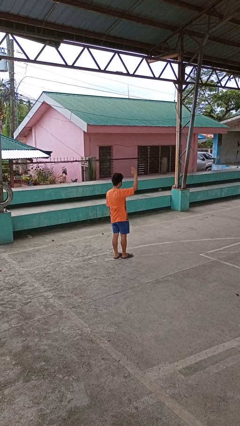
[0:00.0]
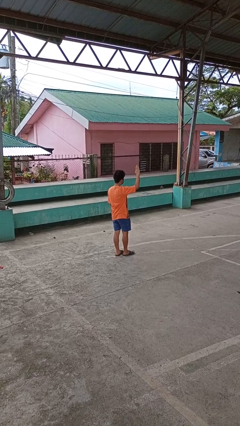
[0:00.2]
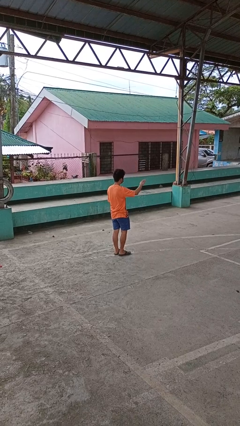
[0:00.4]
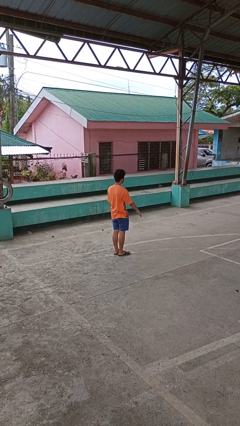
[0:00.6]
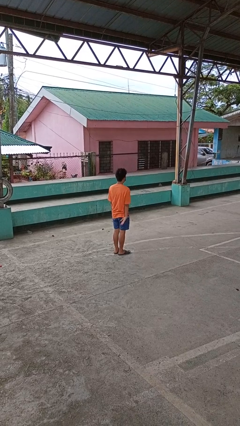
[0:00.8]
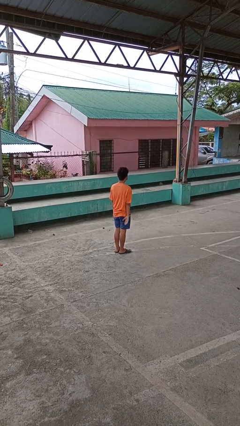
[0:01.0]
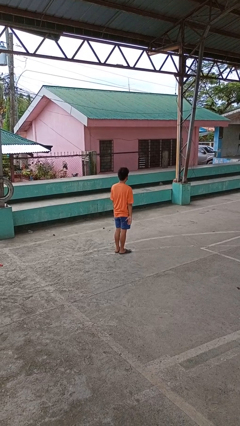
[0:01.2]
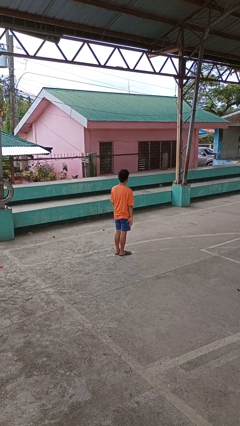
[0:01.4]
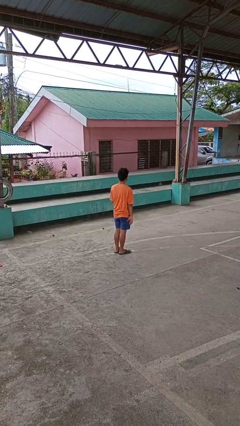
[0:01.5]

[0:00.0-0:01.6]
person gestures lower hand

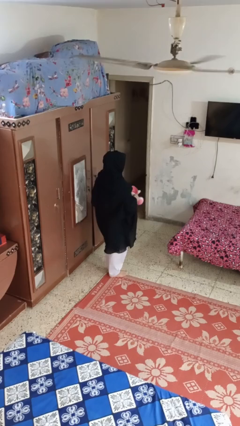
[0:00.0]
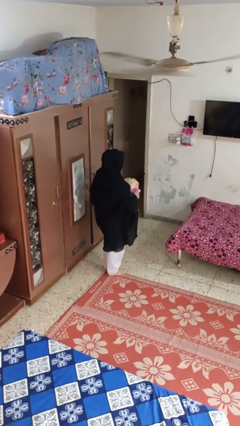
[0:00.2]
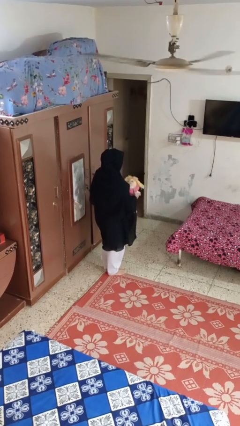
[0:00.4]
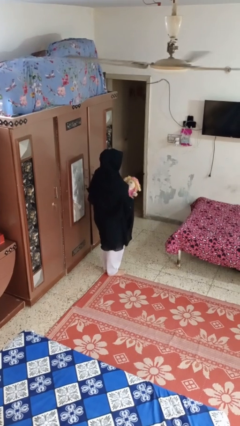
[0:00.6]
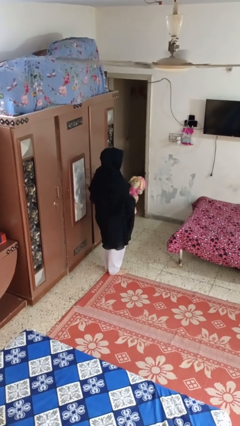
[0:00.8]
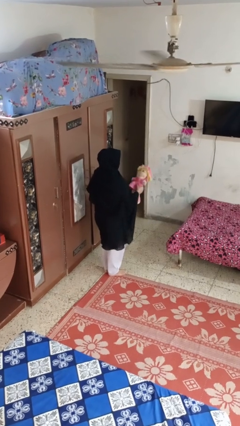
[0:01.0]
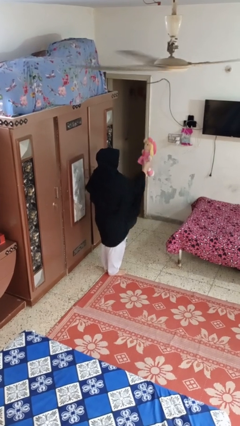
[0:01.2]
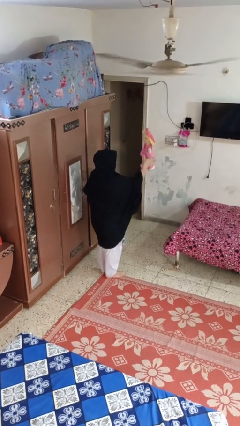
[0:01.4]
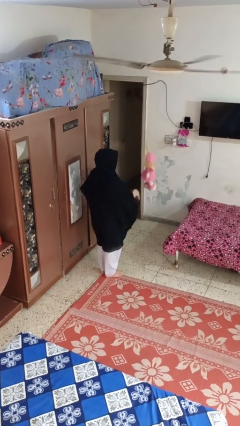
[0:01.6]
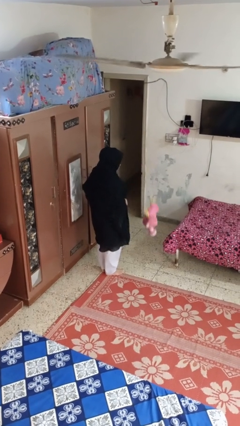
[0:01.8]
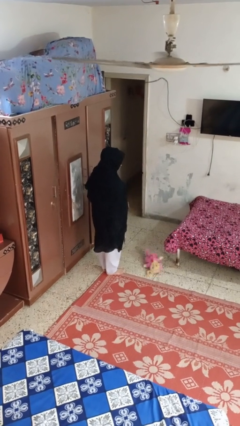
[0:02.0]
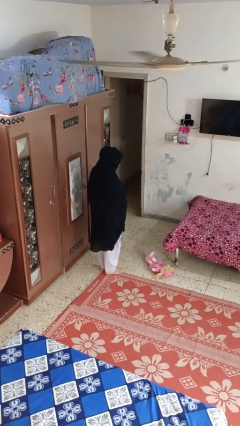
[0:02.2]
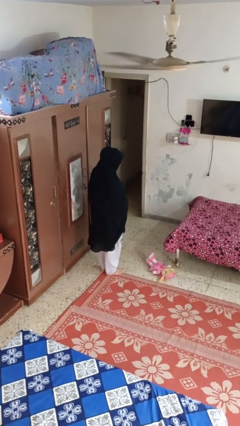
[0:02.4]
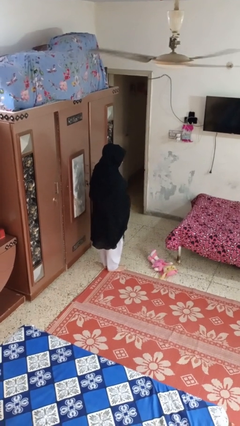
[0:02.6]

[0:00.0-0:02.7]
person throws object into air

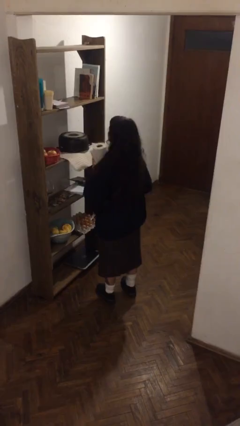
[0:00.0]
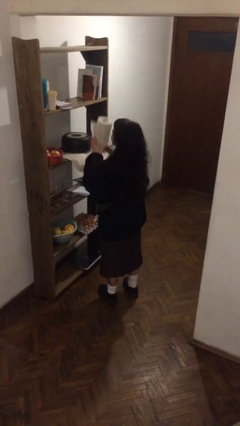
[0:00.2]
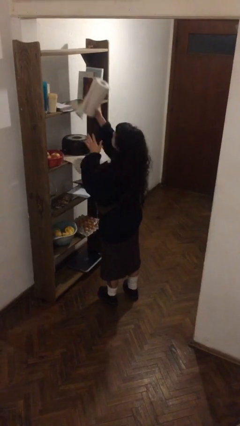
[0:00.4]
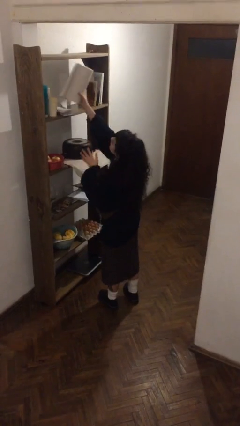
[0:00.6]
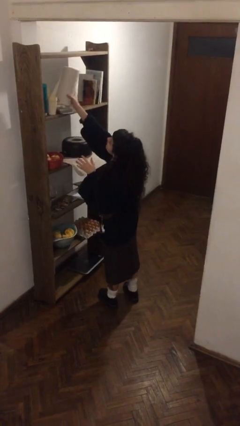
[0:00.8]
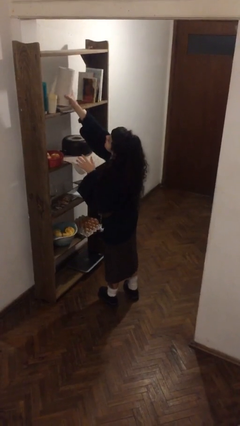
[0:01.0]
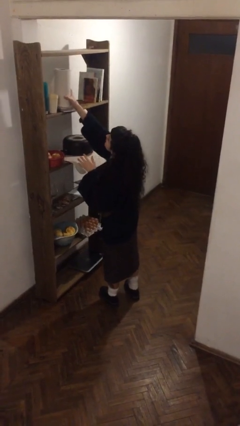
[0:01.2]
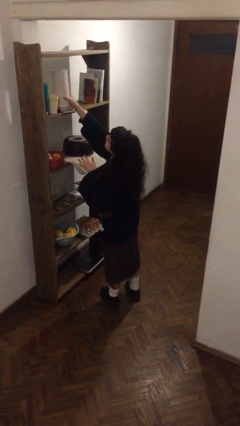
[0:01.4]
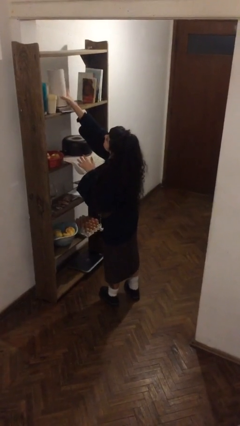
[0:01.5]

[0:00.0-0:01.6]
person puts down object on shelf

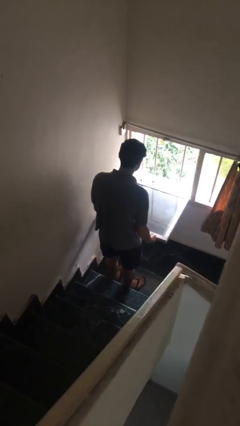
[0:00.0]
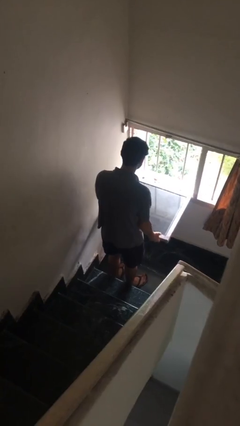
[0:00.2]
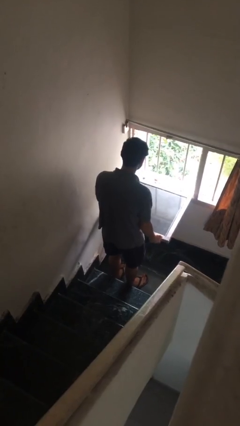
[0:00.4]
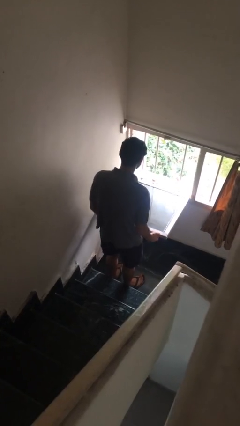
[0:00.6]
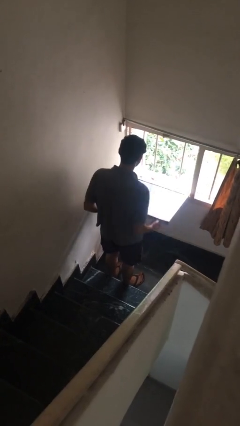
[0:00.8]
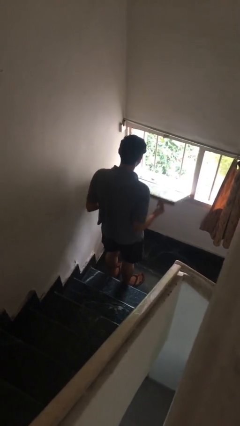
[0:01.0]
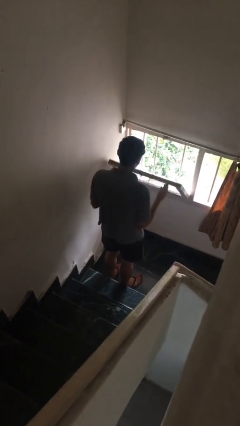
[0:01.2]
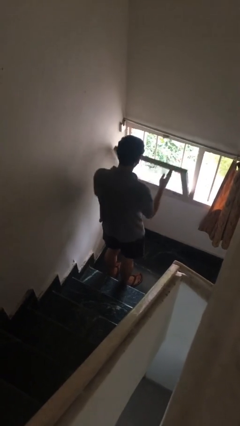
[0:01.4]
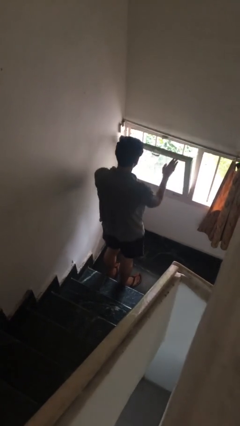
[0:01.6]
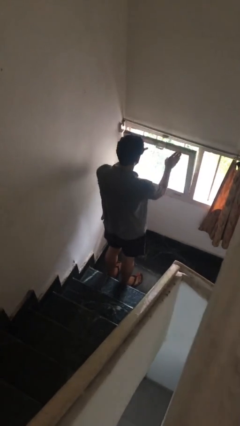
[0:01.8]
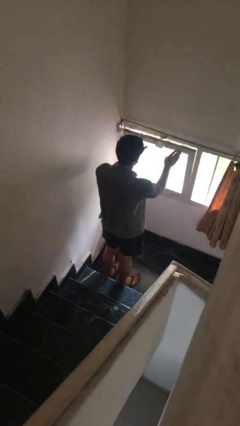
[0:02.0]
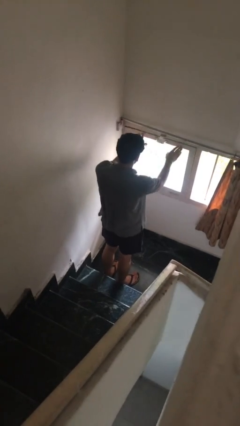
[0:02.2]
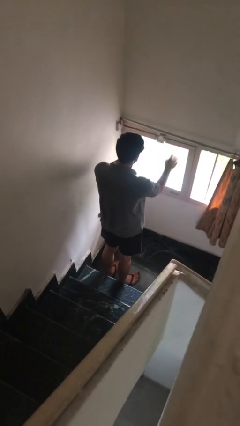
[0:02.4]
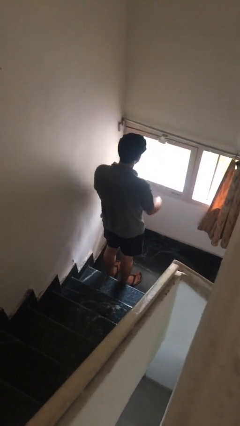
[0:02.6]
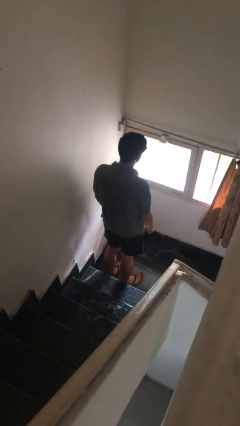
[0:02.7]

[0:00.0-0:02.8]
person closes home window

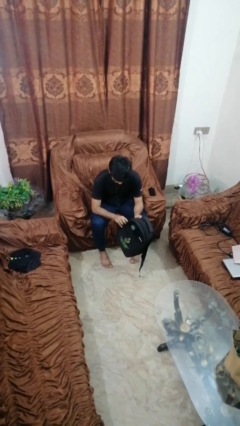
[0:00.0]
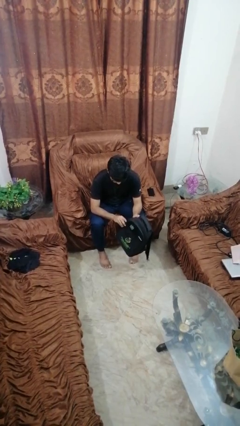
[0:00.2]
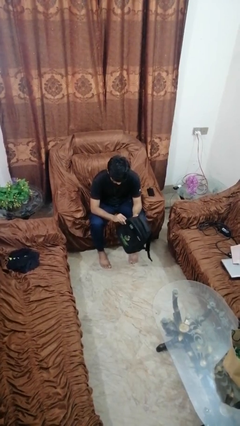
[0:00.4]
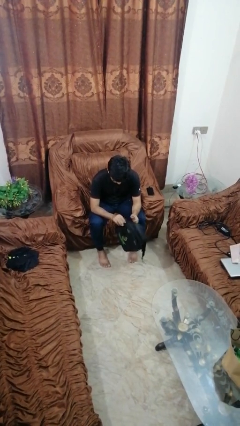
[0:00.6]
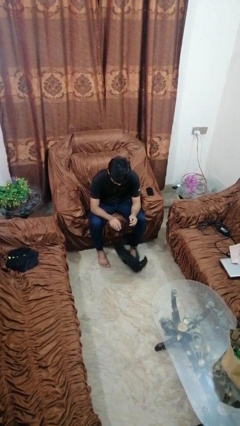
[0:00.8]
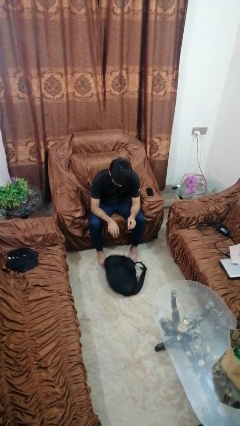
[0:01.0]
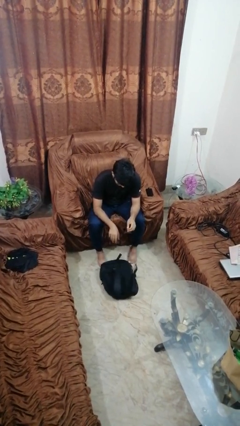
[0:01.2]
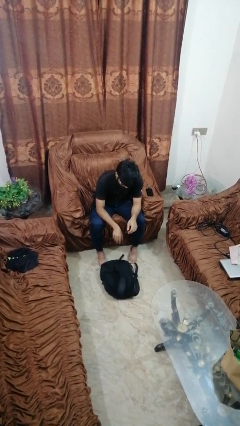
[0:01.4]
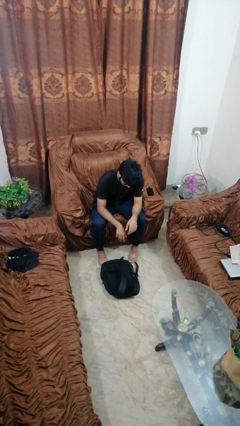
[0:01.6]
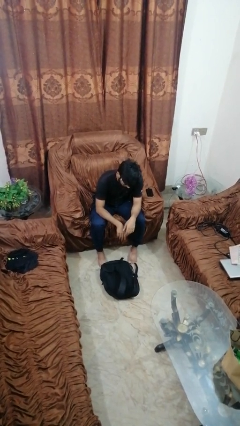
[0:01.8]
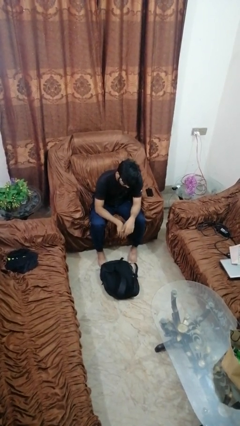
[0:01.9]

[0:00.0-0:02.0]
person drops object

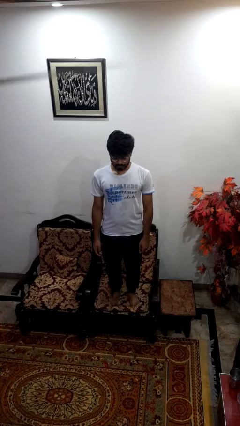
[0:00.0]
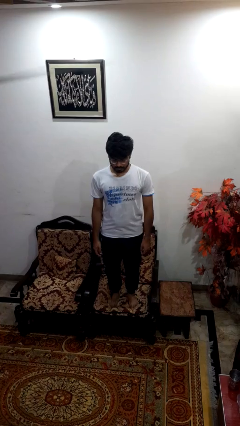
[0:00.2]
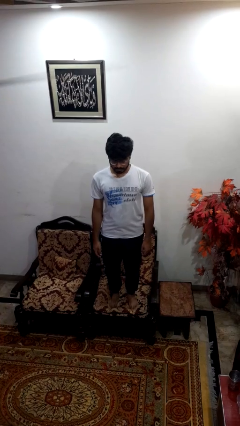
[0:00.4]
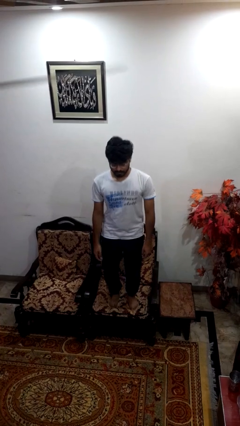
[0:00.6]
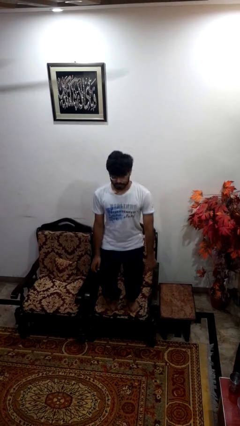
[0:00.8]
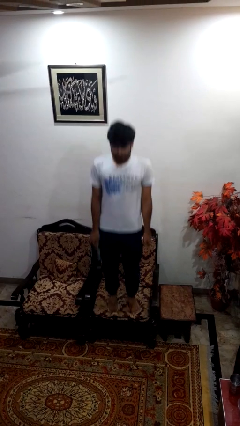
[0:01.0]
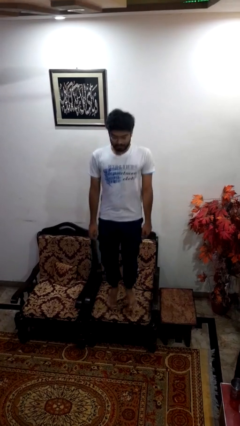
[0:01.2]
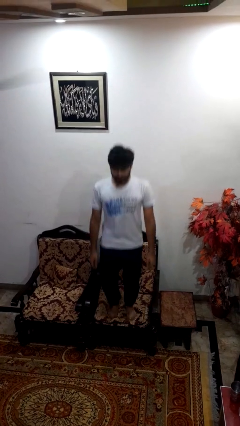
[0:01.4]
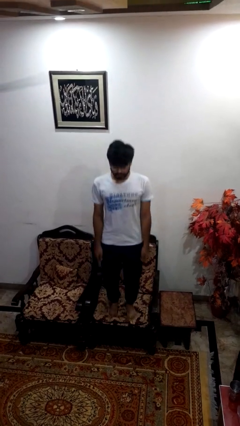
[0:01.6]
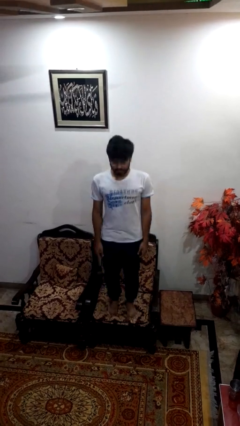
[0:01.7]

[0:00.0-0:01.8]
person jumps on couch

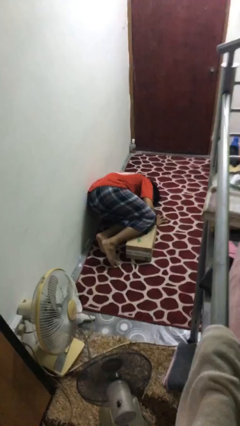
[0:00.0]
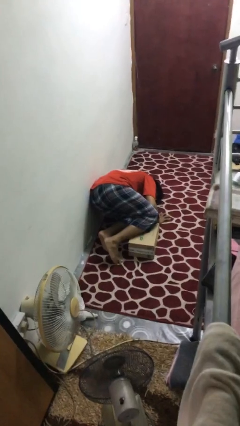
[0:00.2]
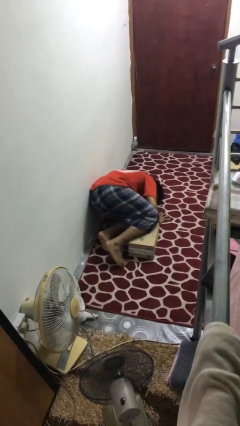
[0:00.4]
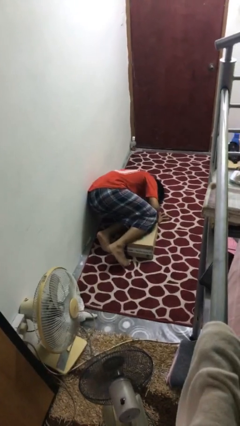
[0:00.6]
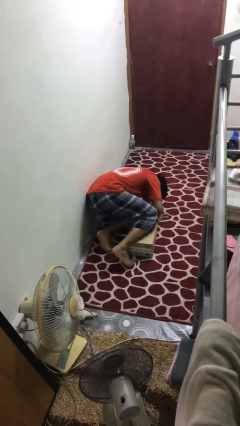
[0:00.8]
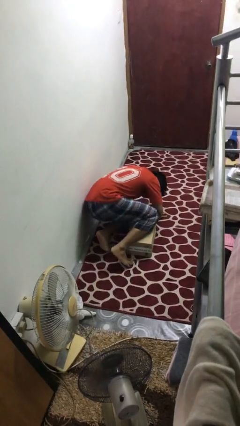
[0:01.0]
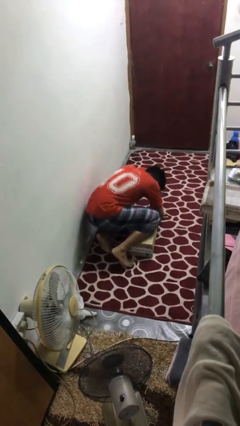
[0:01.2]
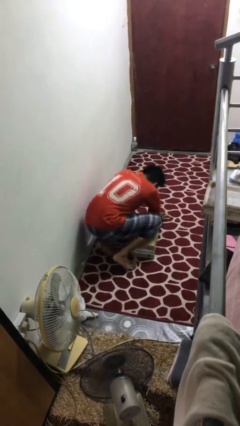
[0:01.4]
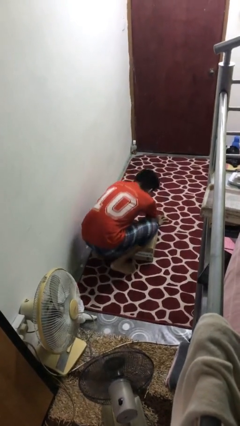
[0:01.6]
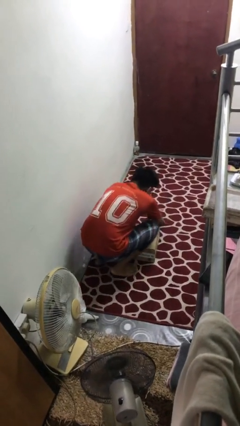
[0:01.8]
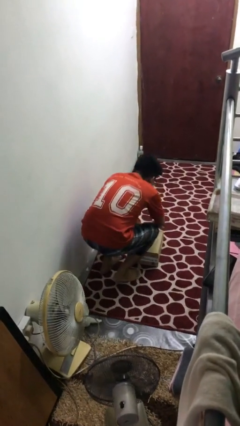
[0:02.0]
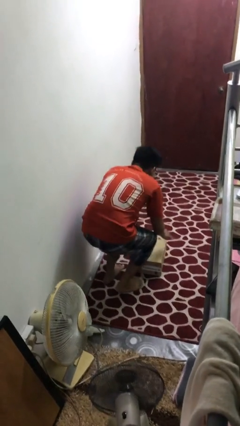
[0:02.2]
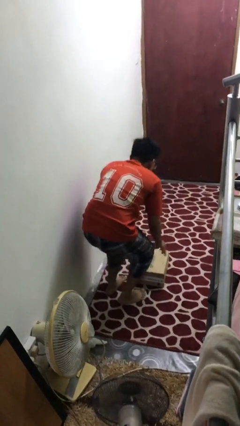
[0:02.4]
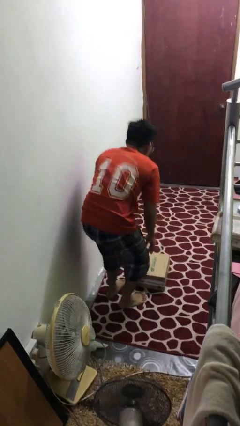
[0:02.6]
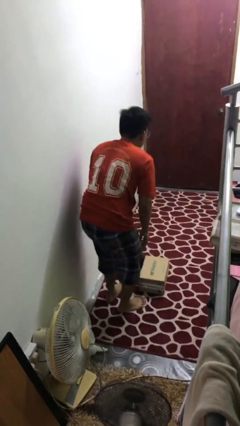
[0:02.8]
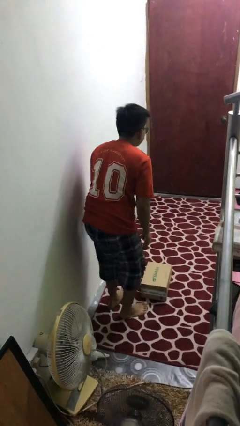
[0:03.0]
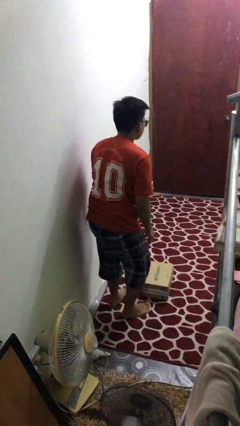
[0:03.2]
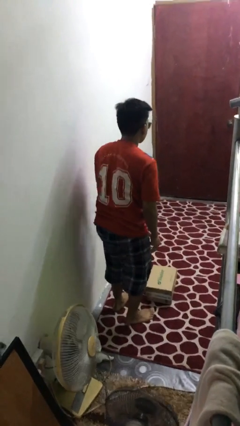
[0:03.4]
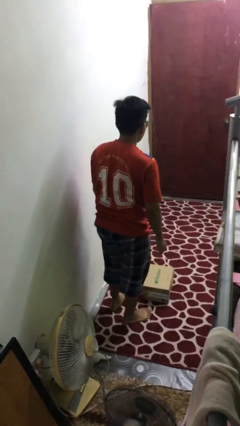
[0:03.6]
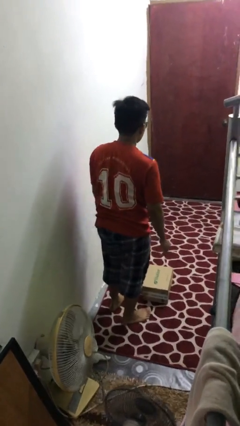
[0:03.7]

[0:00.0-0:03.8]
person stands up from floor

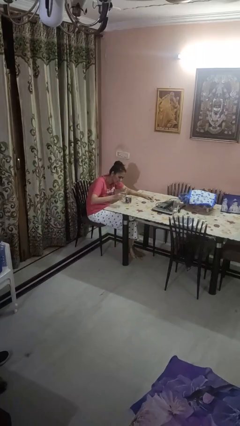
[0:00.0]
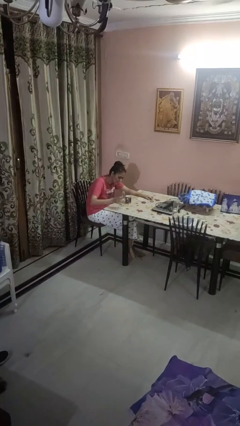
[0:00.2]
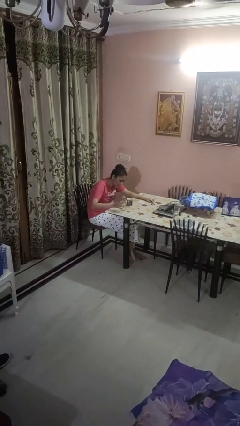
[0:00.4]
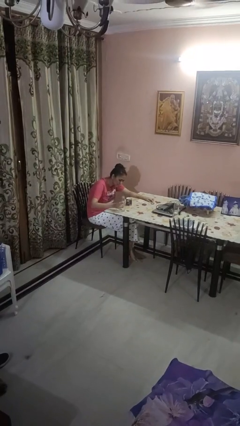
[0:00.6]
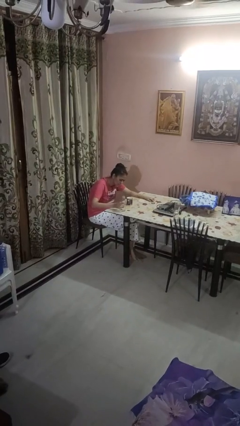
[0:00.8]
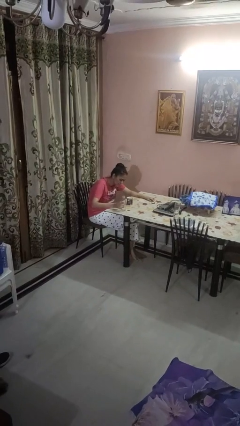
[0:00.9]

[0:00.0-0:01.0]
person pours liquid into cup
